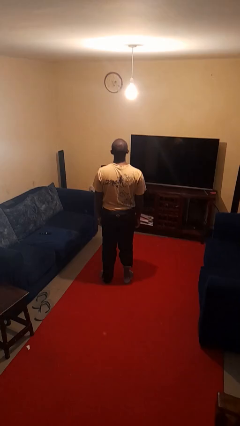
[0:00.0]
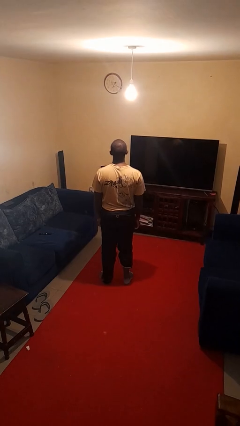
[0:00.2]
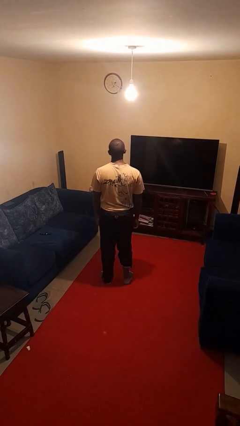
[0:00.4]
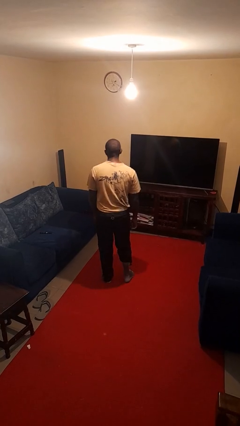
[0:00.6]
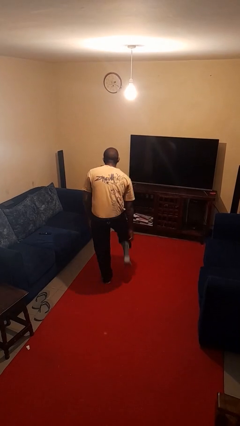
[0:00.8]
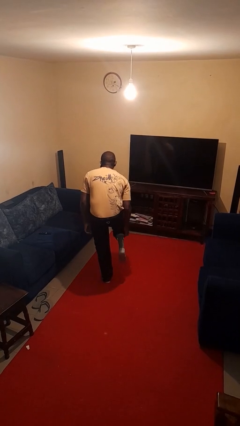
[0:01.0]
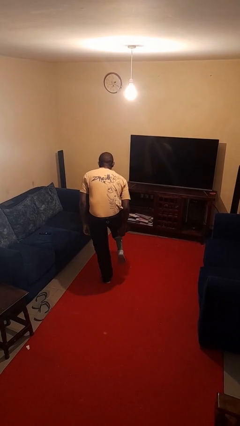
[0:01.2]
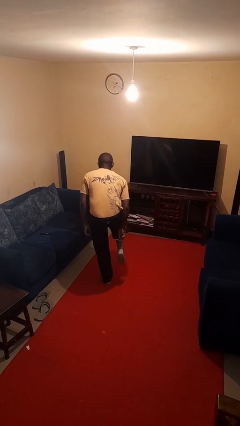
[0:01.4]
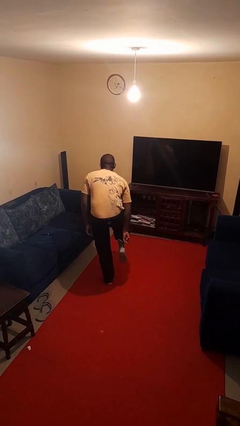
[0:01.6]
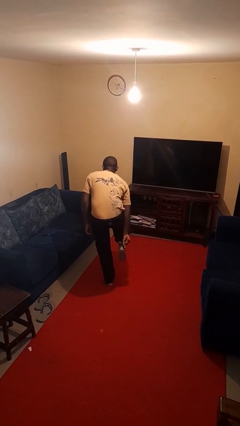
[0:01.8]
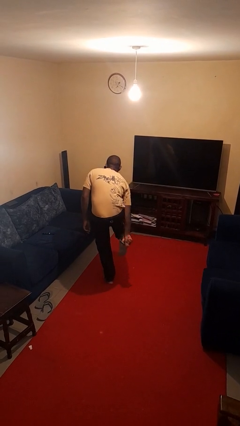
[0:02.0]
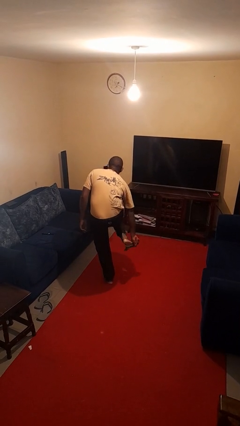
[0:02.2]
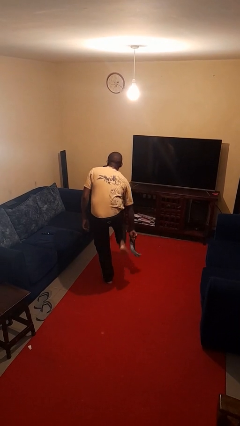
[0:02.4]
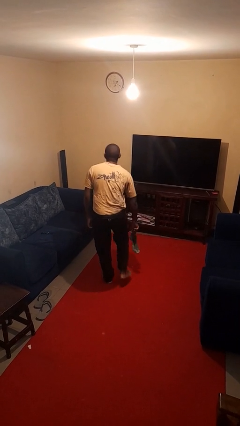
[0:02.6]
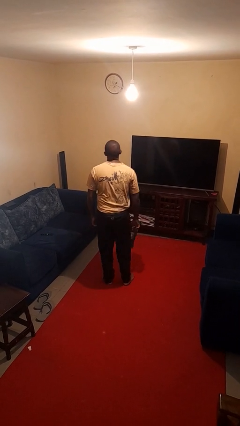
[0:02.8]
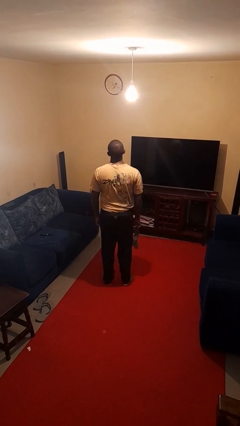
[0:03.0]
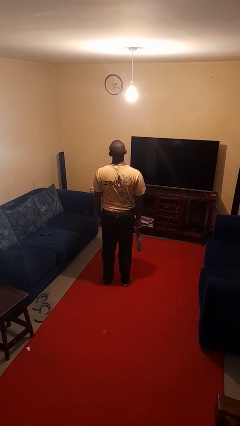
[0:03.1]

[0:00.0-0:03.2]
person takes off socks

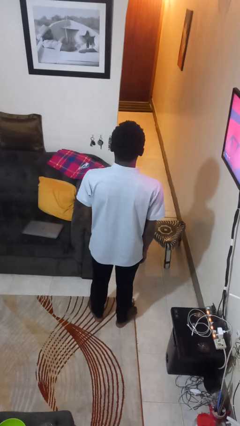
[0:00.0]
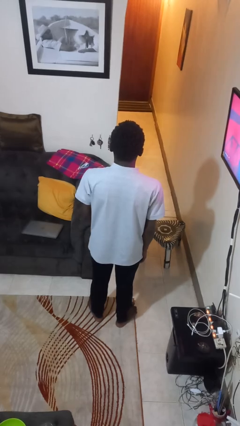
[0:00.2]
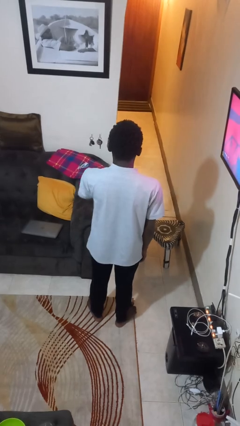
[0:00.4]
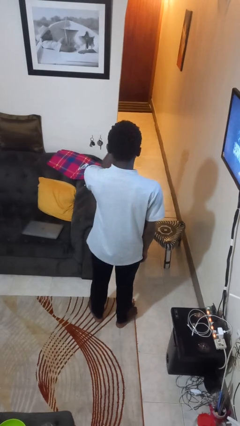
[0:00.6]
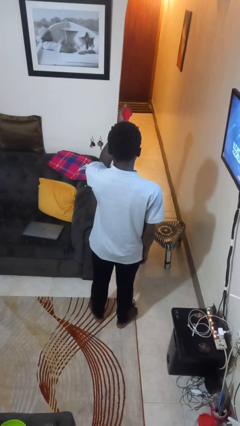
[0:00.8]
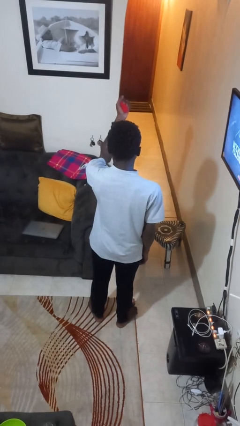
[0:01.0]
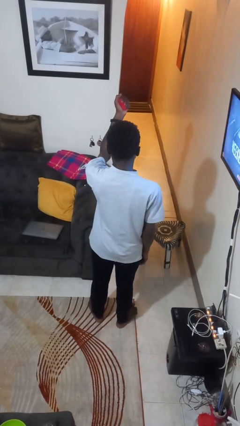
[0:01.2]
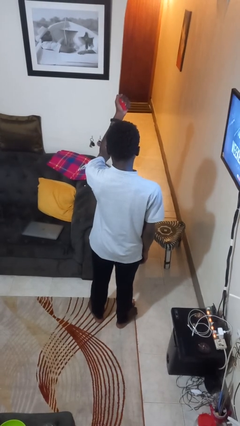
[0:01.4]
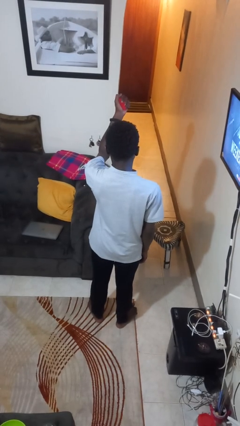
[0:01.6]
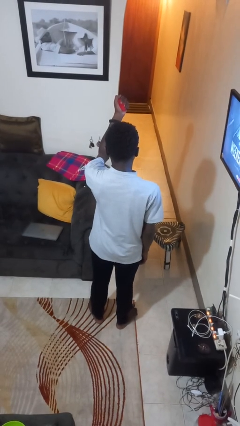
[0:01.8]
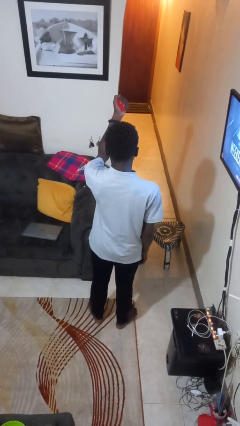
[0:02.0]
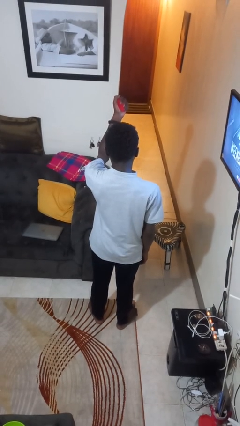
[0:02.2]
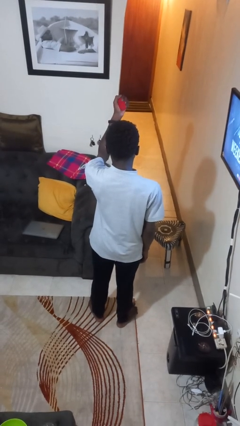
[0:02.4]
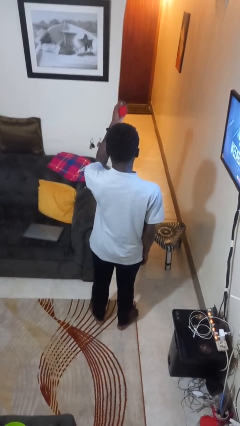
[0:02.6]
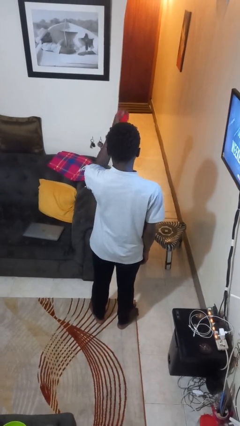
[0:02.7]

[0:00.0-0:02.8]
person squeezes object

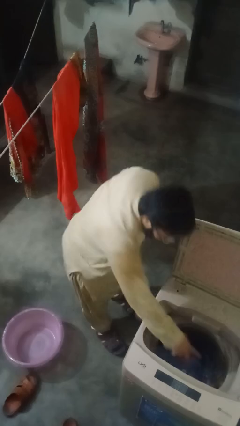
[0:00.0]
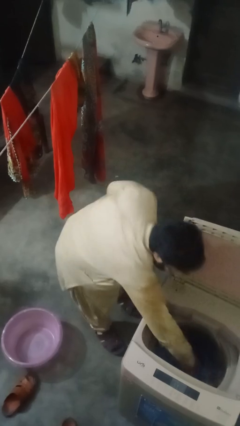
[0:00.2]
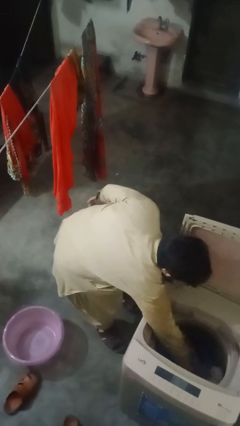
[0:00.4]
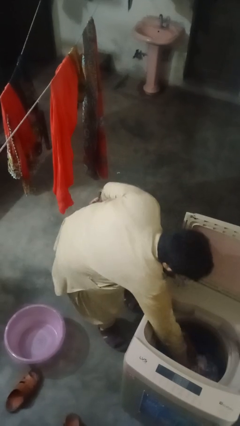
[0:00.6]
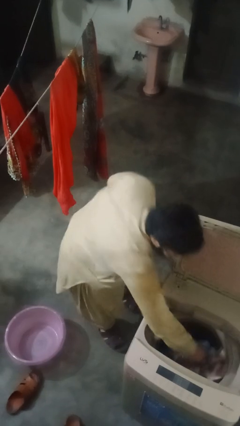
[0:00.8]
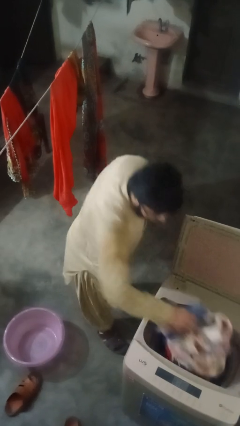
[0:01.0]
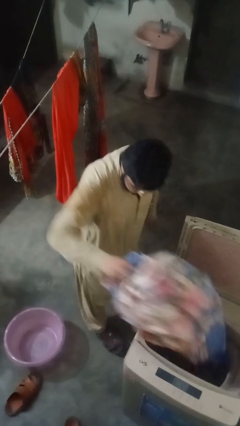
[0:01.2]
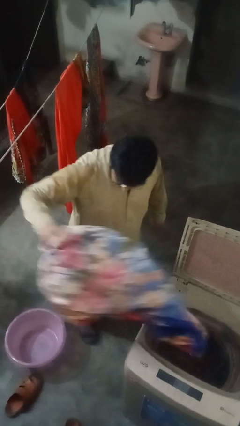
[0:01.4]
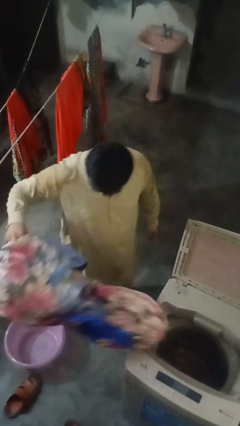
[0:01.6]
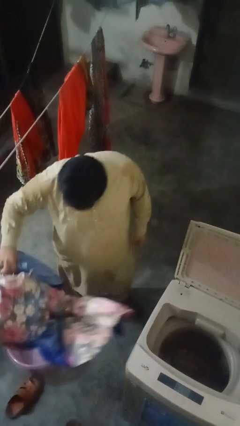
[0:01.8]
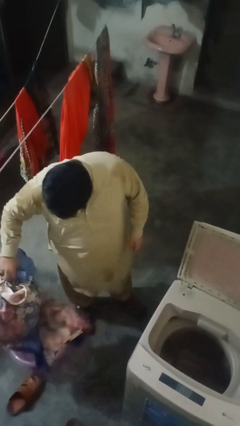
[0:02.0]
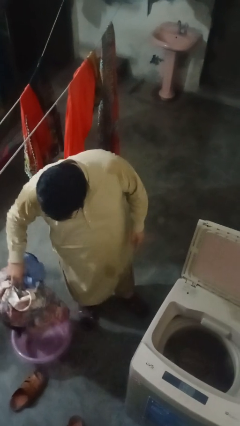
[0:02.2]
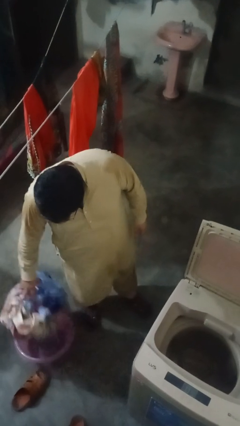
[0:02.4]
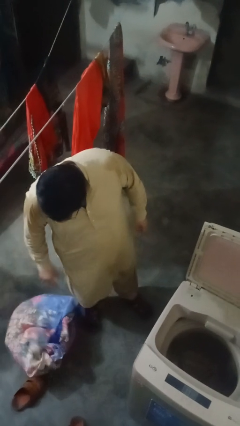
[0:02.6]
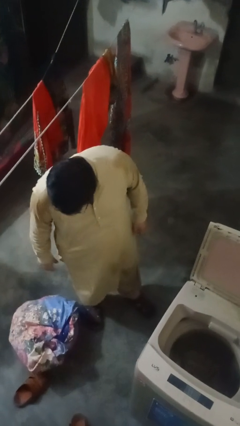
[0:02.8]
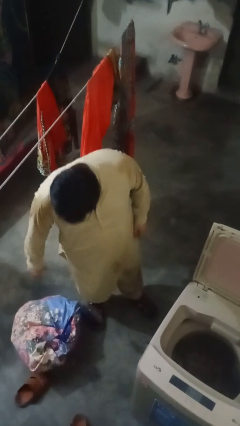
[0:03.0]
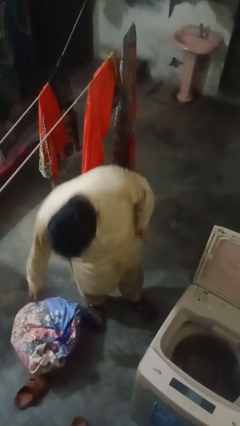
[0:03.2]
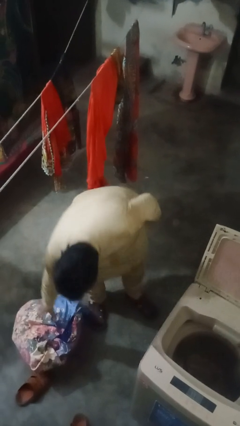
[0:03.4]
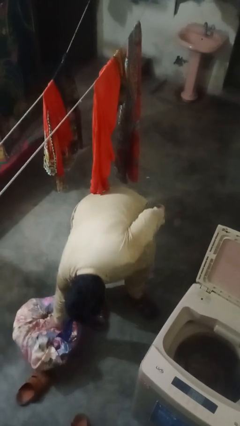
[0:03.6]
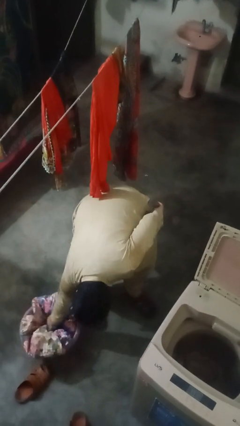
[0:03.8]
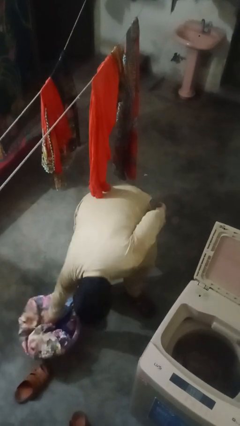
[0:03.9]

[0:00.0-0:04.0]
person loads clotheswasher

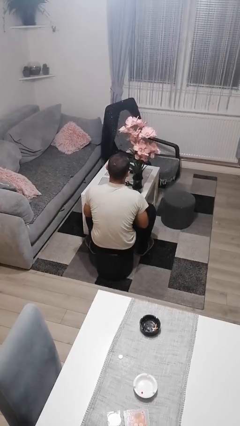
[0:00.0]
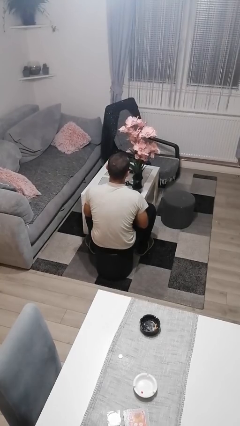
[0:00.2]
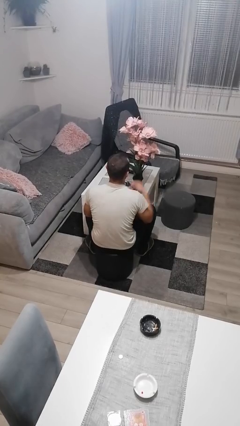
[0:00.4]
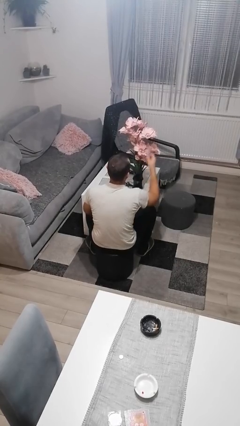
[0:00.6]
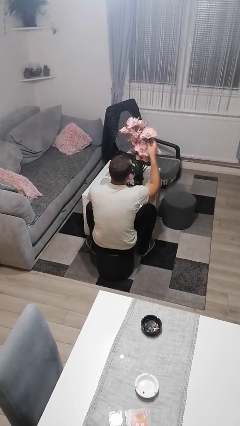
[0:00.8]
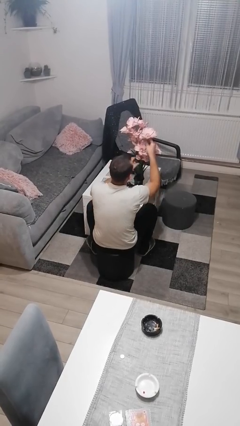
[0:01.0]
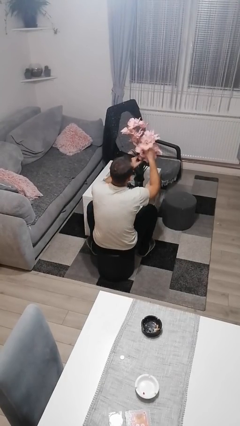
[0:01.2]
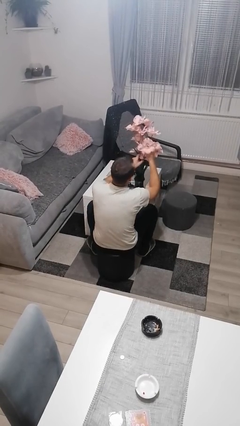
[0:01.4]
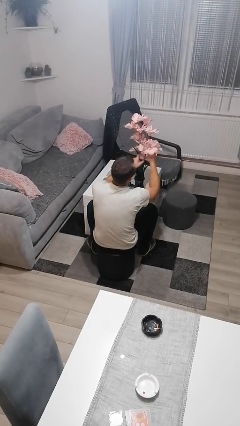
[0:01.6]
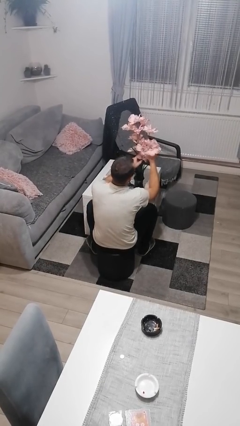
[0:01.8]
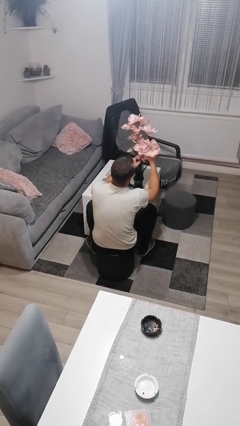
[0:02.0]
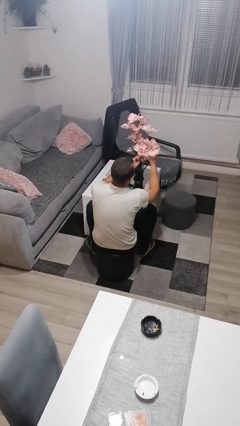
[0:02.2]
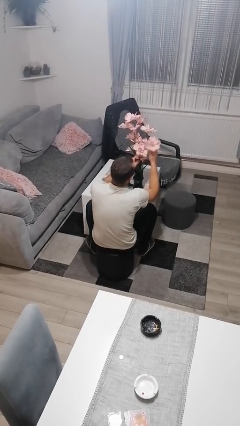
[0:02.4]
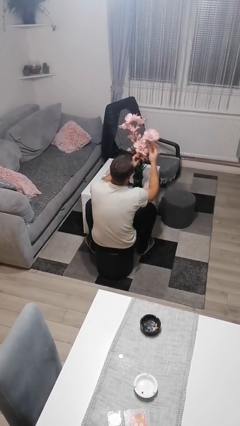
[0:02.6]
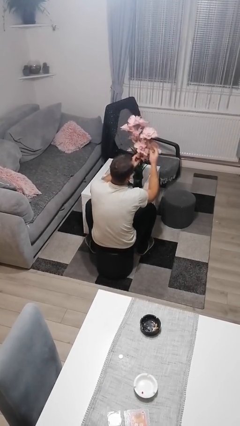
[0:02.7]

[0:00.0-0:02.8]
person arranges flowers in vase

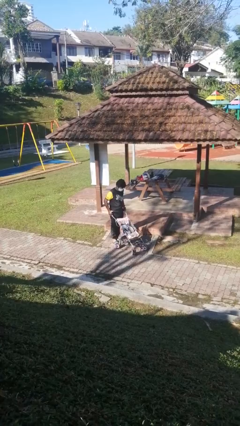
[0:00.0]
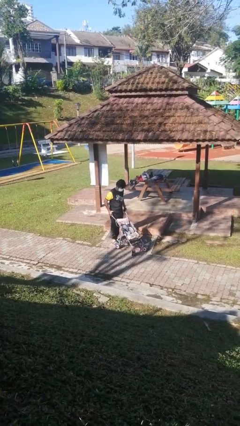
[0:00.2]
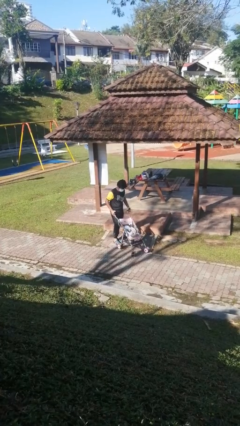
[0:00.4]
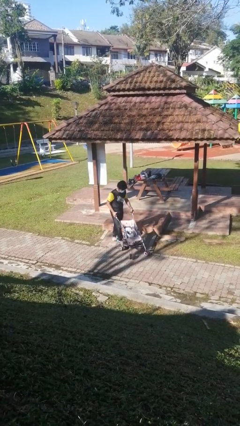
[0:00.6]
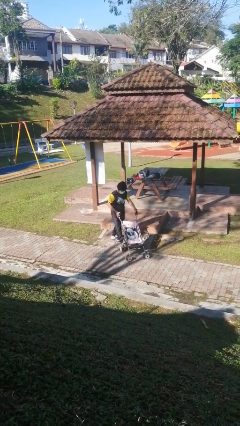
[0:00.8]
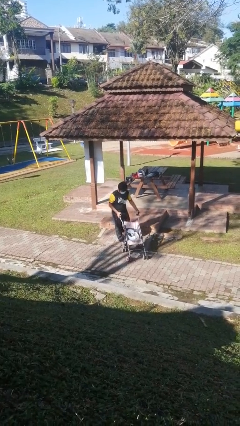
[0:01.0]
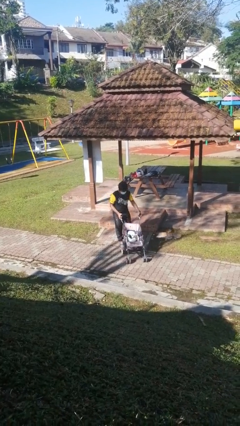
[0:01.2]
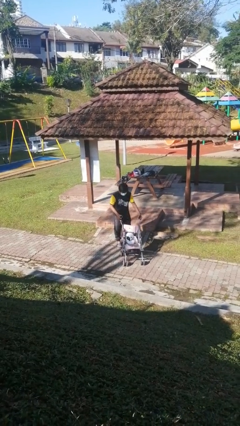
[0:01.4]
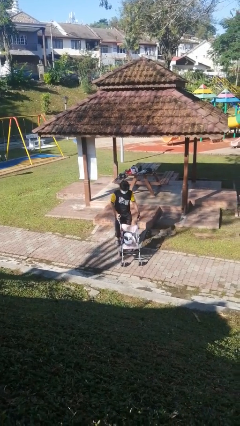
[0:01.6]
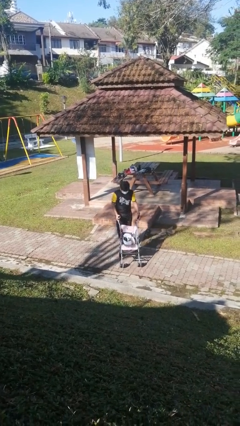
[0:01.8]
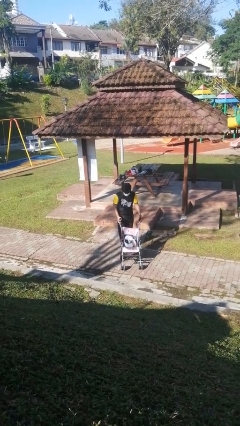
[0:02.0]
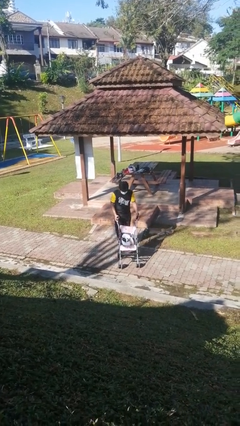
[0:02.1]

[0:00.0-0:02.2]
person pushes wheeled cart

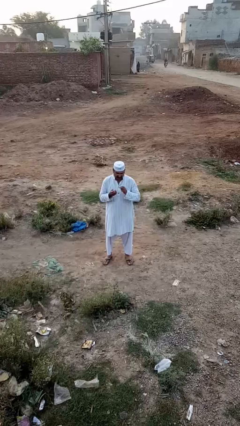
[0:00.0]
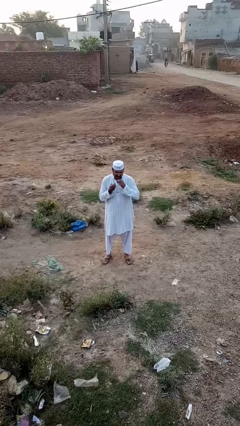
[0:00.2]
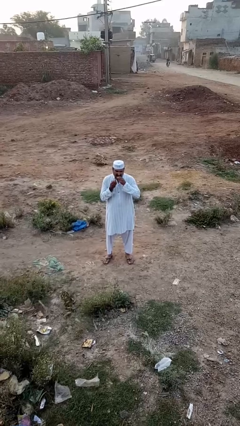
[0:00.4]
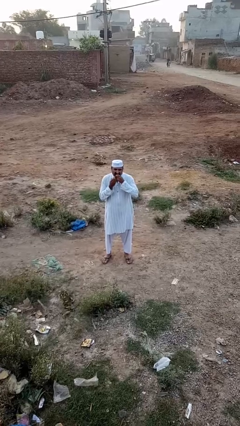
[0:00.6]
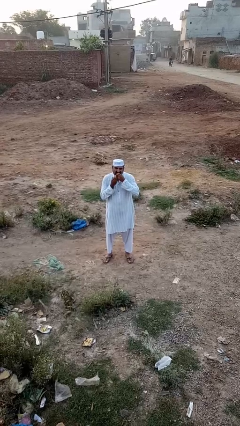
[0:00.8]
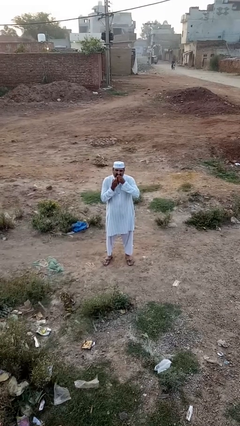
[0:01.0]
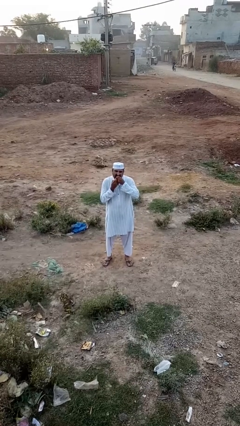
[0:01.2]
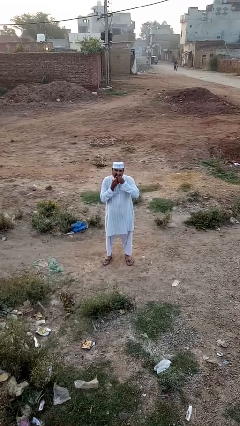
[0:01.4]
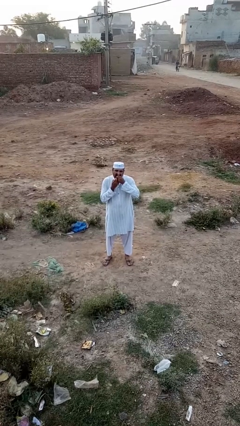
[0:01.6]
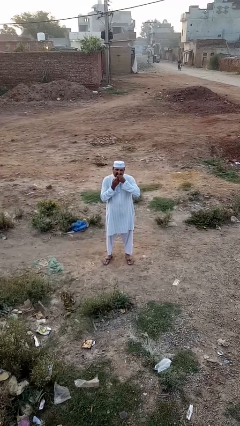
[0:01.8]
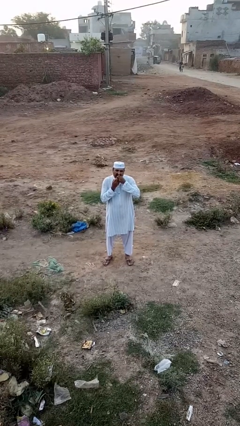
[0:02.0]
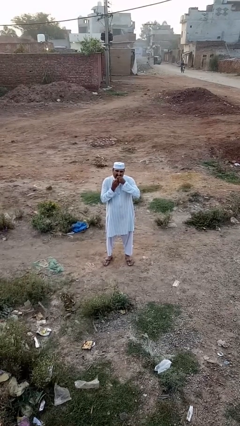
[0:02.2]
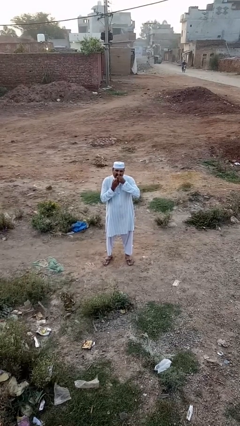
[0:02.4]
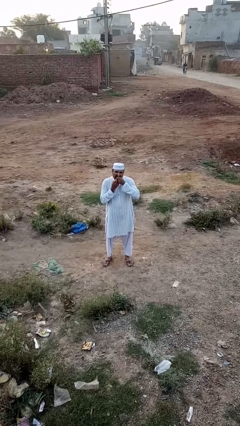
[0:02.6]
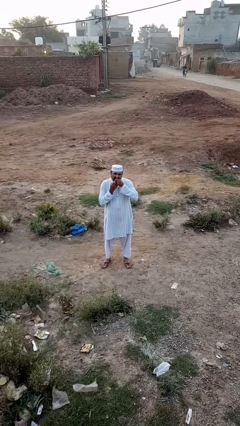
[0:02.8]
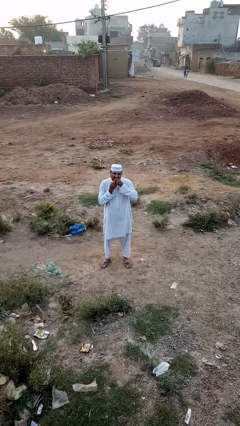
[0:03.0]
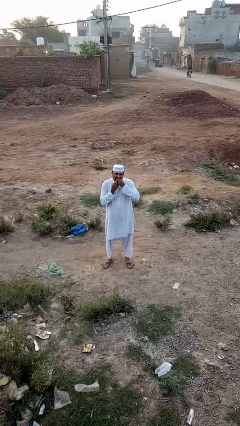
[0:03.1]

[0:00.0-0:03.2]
person flosses
